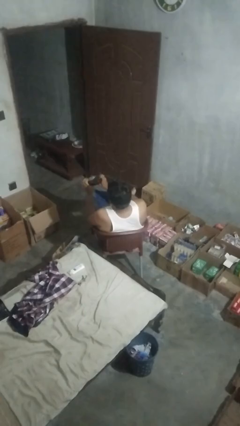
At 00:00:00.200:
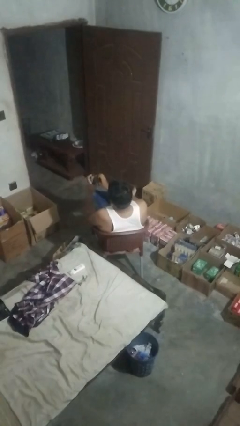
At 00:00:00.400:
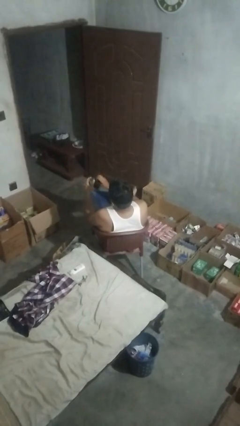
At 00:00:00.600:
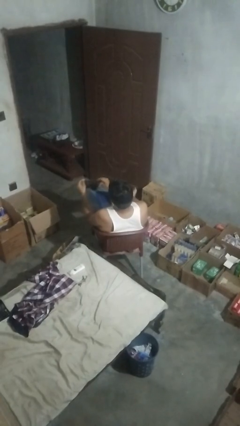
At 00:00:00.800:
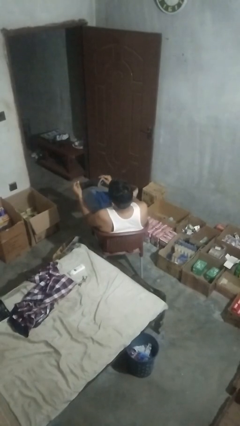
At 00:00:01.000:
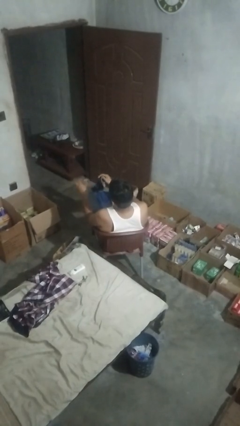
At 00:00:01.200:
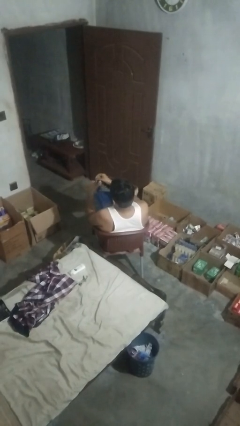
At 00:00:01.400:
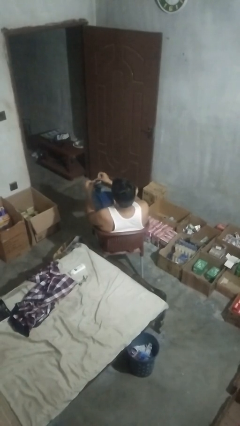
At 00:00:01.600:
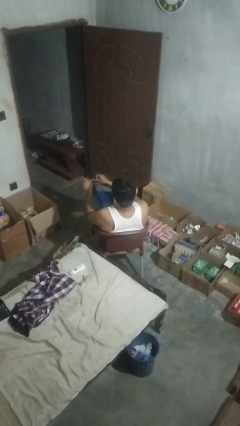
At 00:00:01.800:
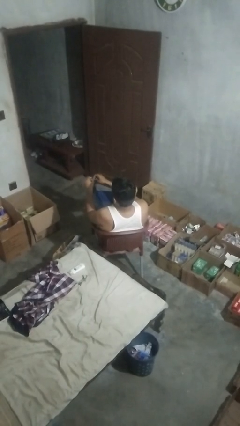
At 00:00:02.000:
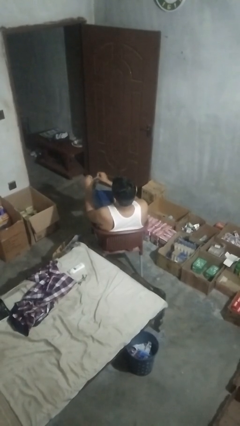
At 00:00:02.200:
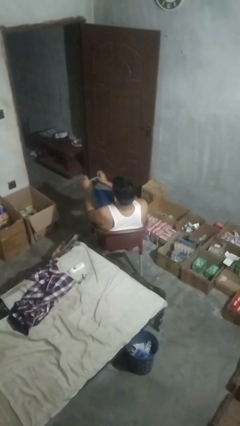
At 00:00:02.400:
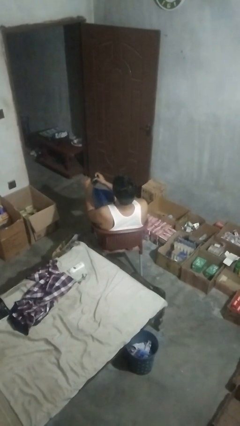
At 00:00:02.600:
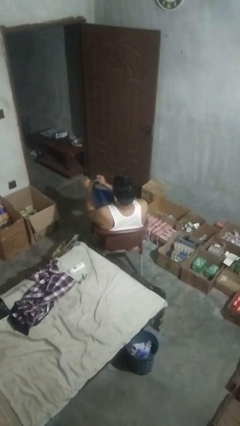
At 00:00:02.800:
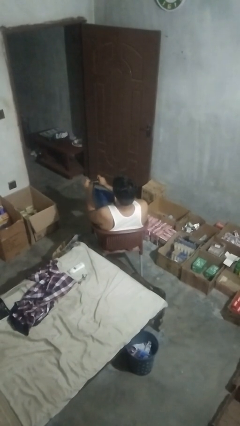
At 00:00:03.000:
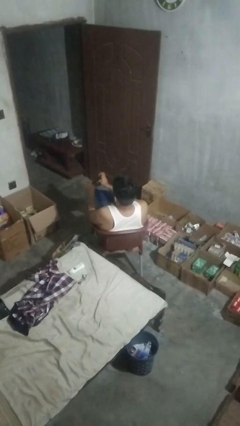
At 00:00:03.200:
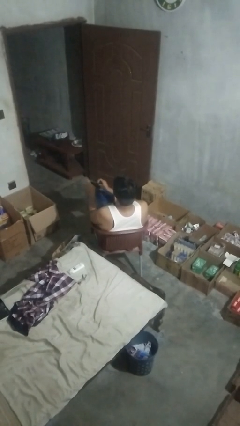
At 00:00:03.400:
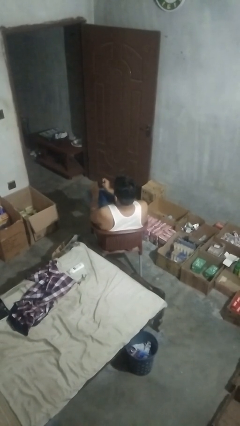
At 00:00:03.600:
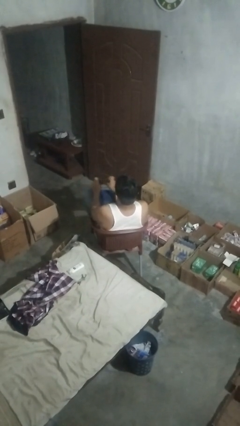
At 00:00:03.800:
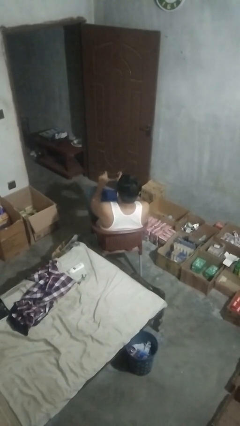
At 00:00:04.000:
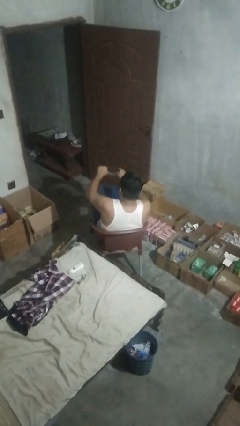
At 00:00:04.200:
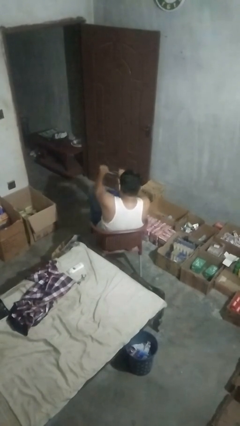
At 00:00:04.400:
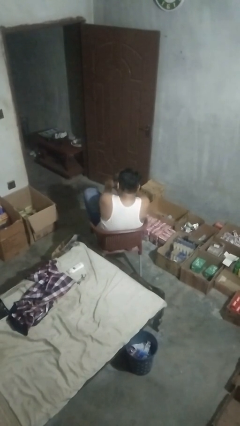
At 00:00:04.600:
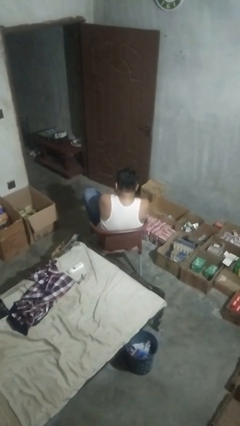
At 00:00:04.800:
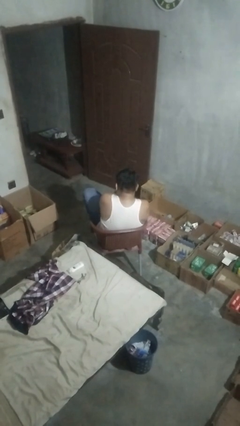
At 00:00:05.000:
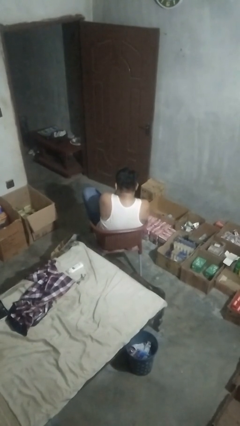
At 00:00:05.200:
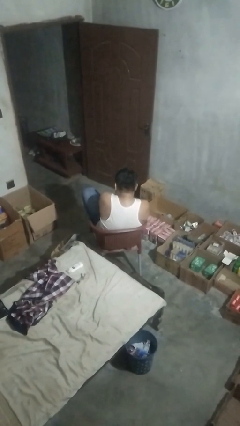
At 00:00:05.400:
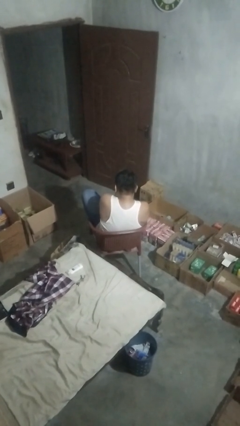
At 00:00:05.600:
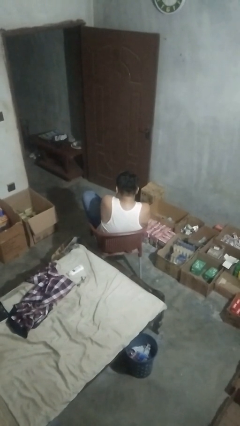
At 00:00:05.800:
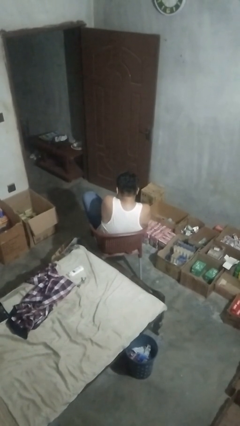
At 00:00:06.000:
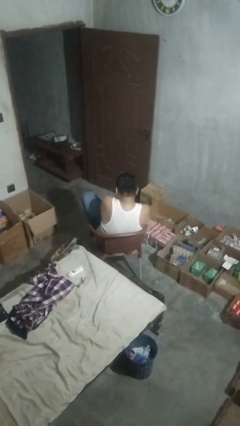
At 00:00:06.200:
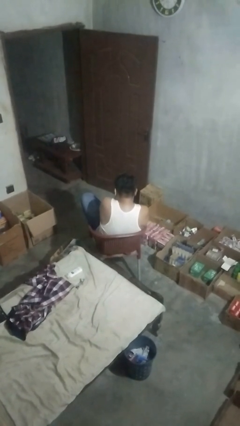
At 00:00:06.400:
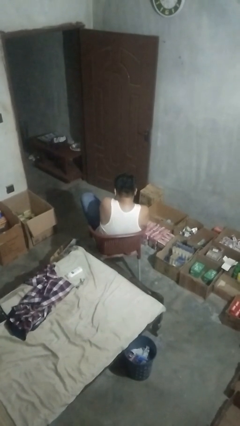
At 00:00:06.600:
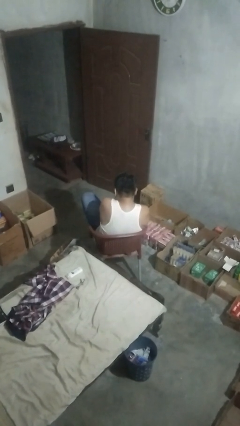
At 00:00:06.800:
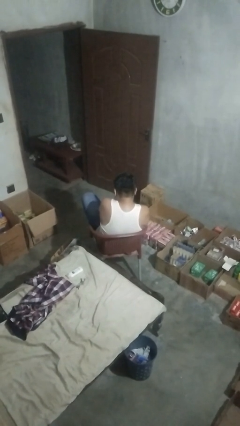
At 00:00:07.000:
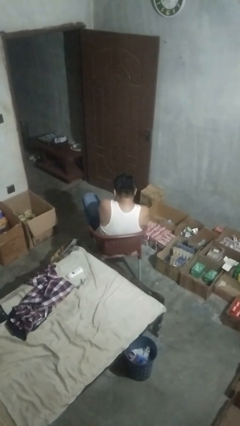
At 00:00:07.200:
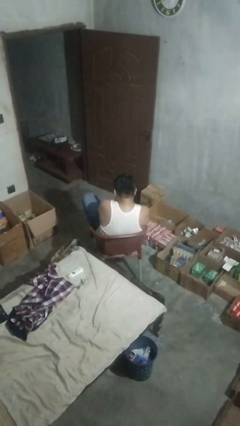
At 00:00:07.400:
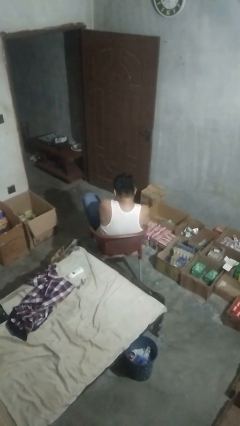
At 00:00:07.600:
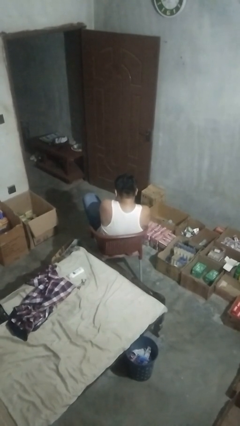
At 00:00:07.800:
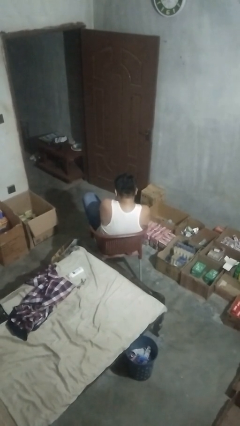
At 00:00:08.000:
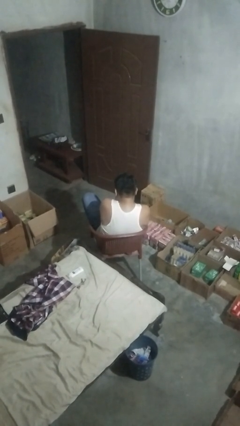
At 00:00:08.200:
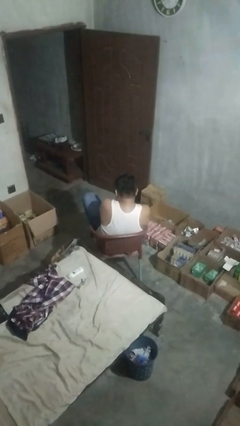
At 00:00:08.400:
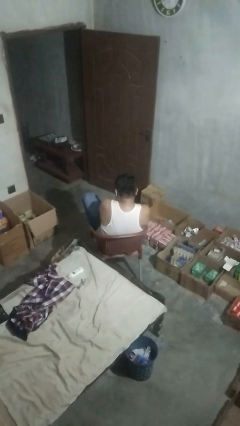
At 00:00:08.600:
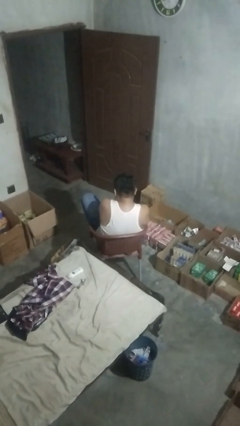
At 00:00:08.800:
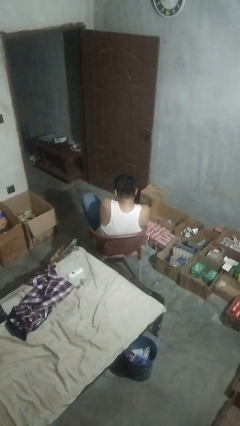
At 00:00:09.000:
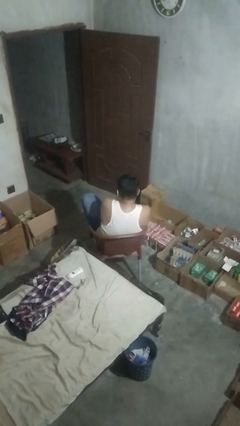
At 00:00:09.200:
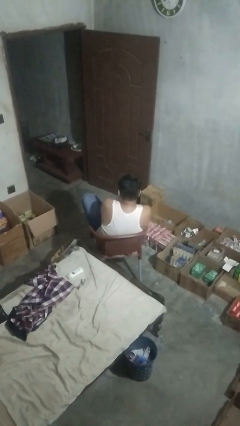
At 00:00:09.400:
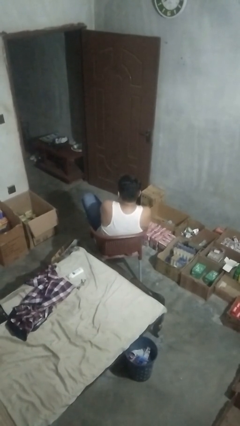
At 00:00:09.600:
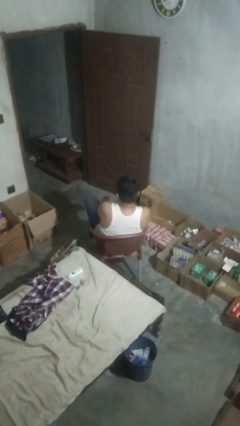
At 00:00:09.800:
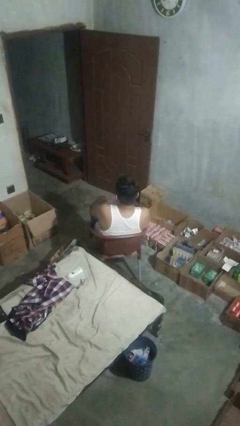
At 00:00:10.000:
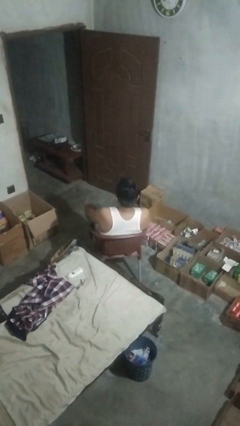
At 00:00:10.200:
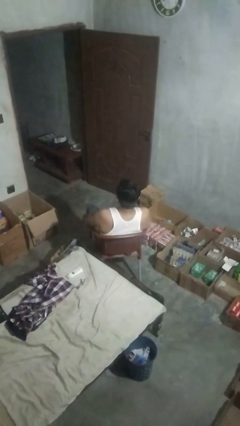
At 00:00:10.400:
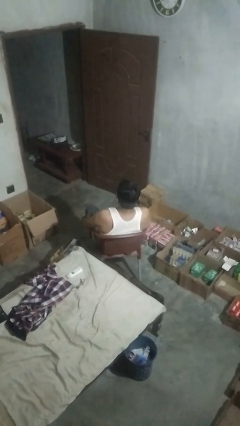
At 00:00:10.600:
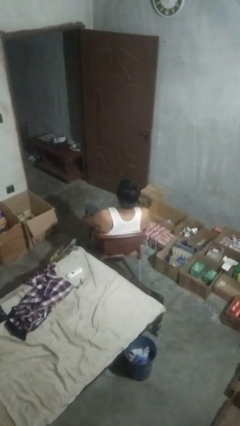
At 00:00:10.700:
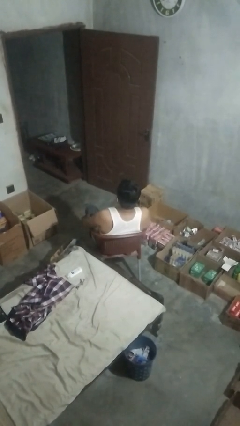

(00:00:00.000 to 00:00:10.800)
person puts on socks

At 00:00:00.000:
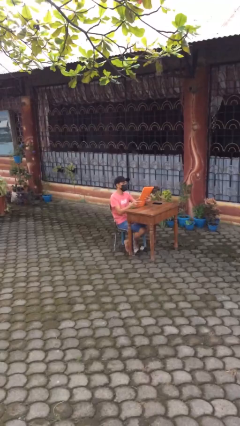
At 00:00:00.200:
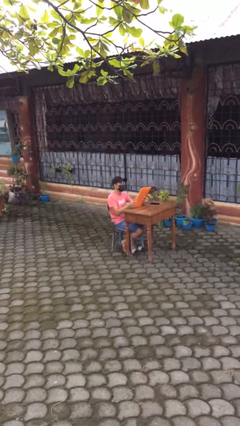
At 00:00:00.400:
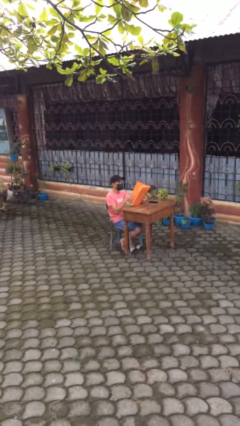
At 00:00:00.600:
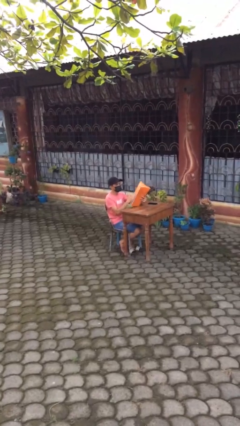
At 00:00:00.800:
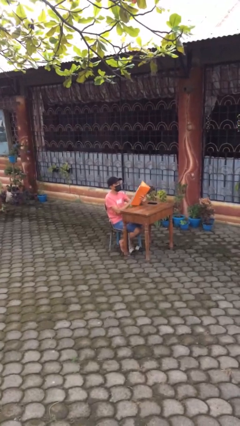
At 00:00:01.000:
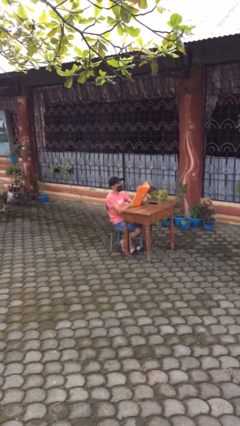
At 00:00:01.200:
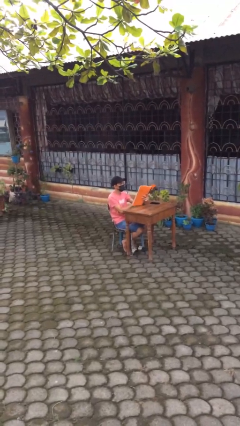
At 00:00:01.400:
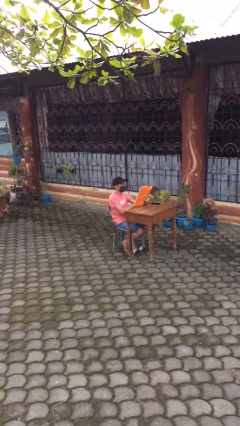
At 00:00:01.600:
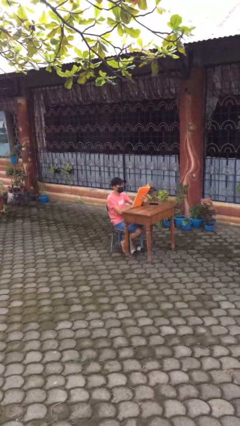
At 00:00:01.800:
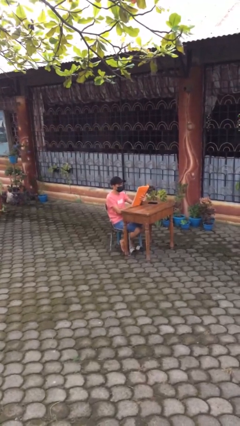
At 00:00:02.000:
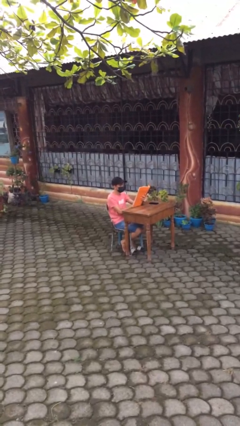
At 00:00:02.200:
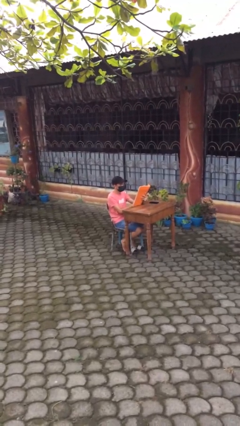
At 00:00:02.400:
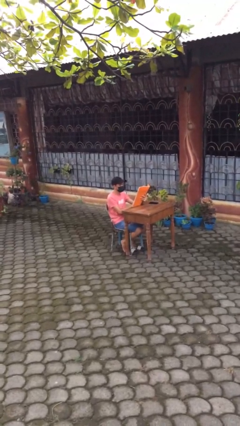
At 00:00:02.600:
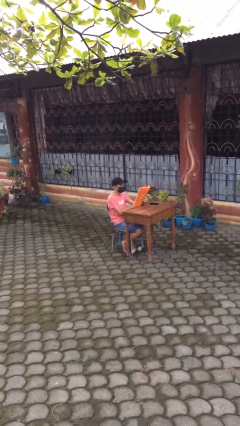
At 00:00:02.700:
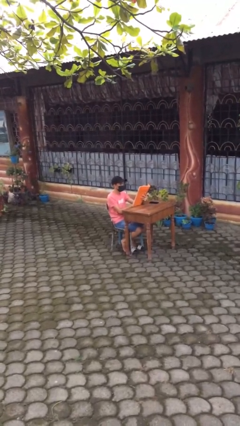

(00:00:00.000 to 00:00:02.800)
person reads document

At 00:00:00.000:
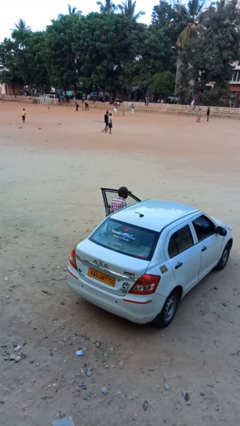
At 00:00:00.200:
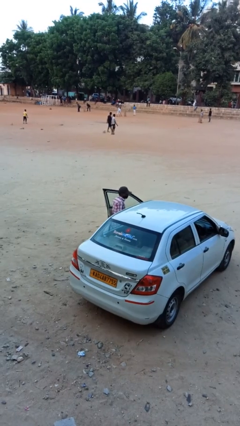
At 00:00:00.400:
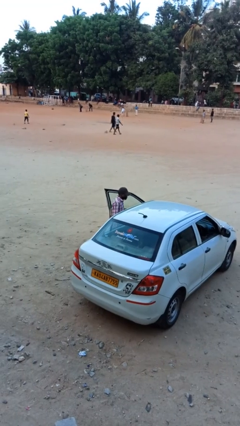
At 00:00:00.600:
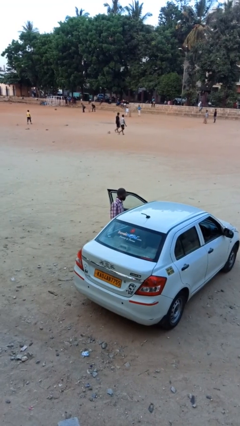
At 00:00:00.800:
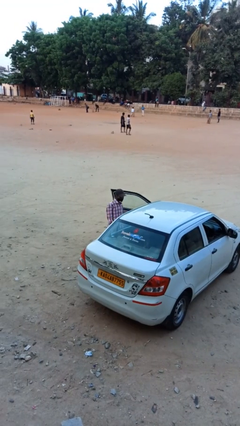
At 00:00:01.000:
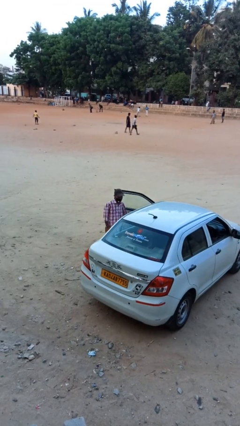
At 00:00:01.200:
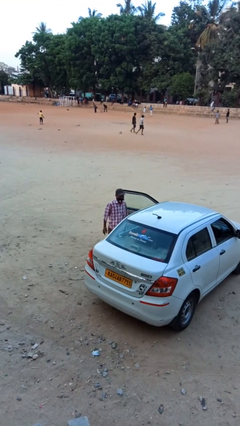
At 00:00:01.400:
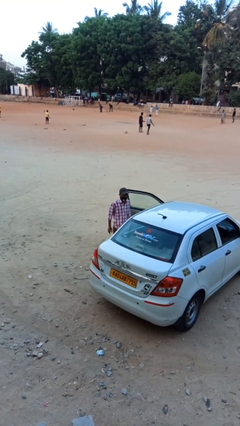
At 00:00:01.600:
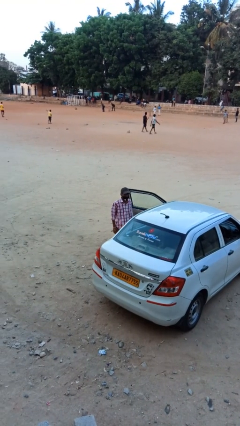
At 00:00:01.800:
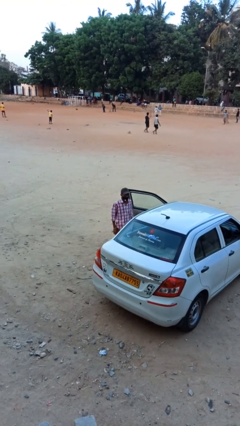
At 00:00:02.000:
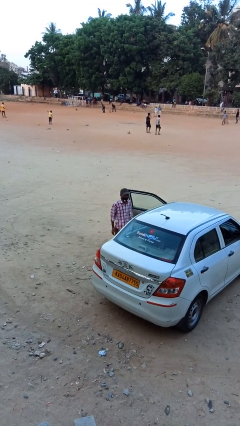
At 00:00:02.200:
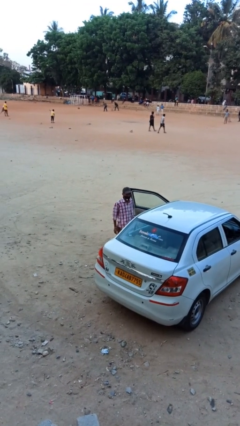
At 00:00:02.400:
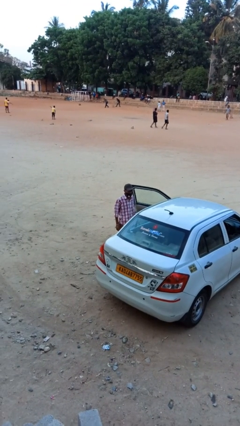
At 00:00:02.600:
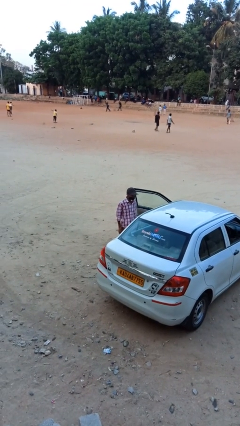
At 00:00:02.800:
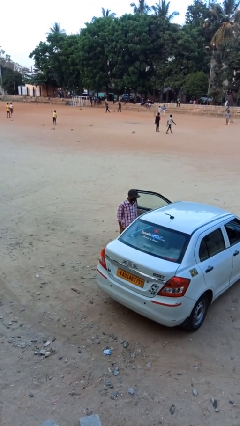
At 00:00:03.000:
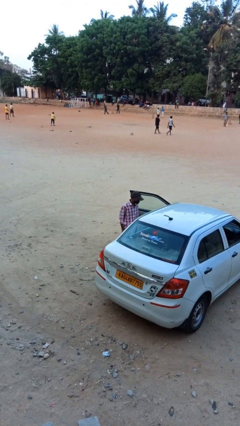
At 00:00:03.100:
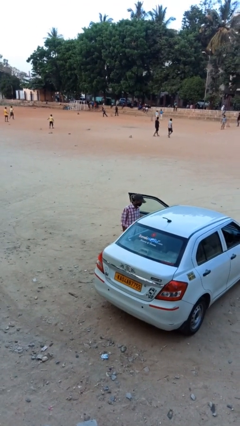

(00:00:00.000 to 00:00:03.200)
person exits car

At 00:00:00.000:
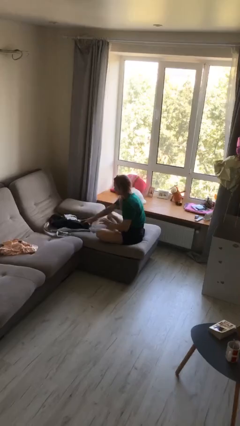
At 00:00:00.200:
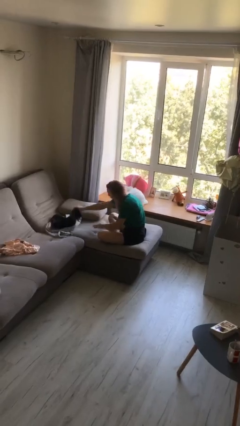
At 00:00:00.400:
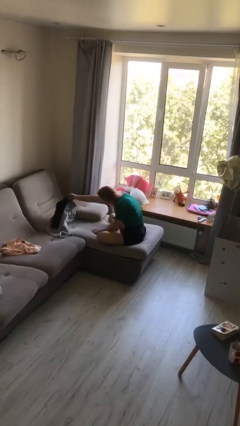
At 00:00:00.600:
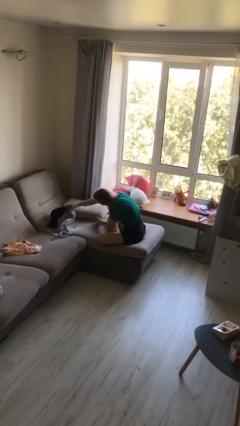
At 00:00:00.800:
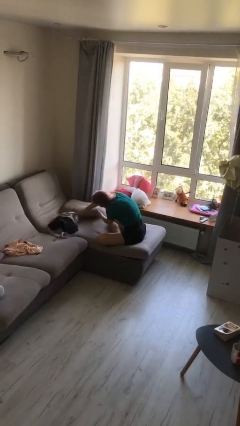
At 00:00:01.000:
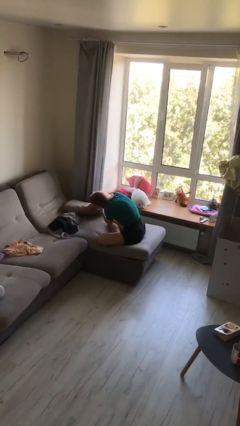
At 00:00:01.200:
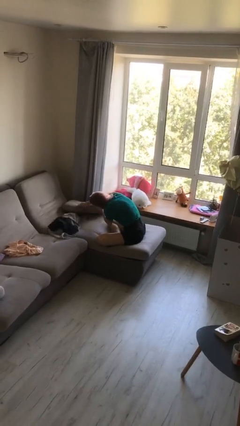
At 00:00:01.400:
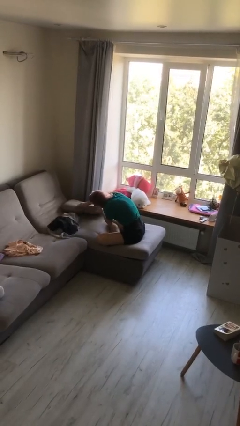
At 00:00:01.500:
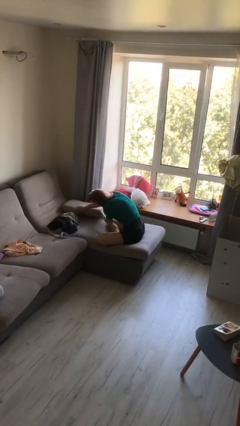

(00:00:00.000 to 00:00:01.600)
person searches in couch
